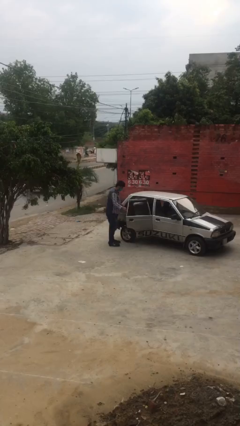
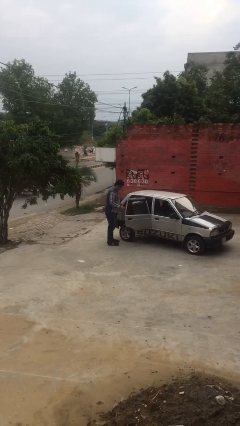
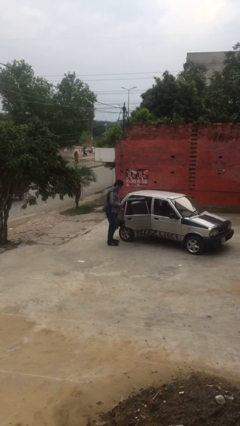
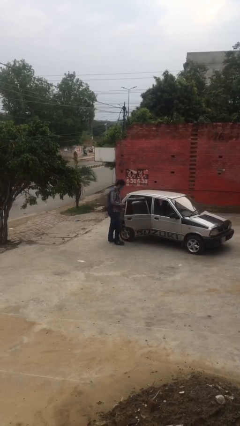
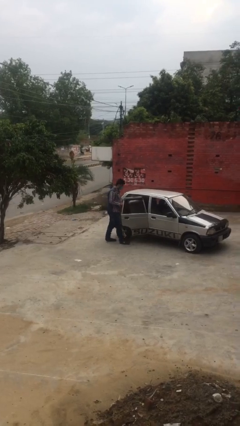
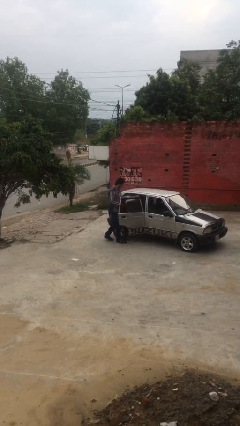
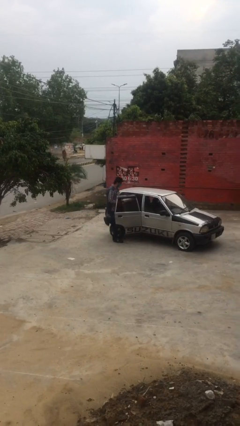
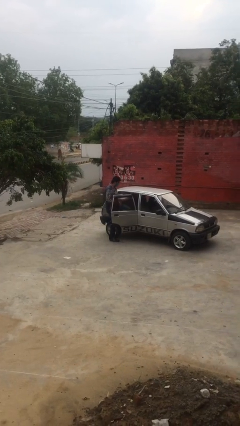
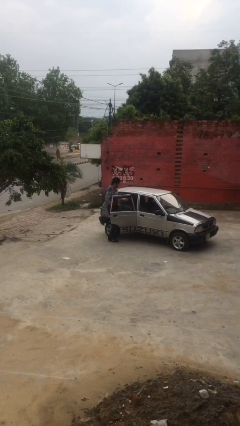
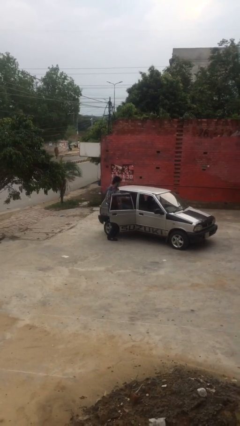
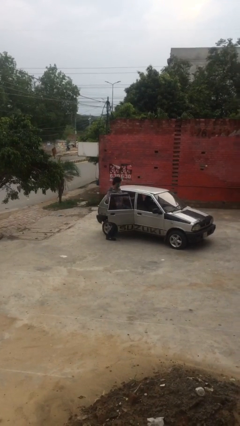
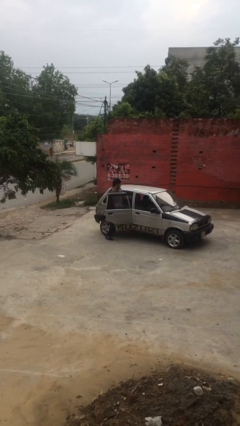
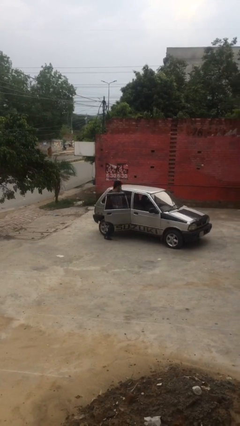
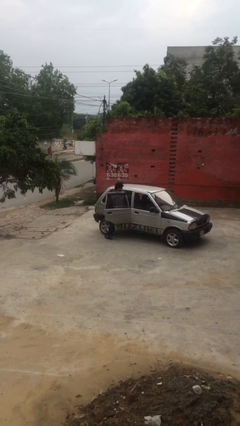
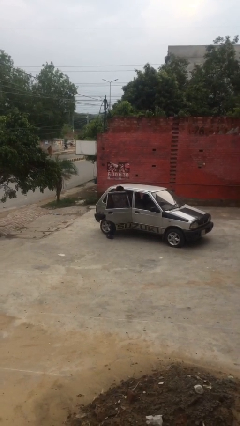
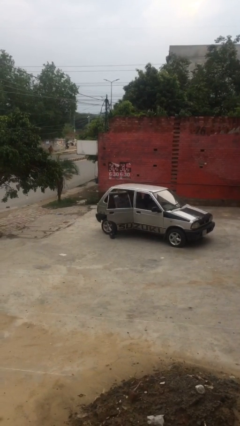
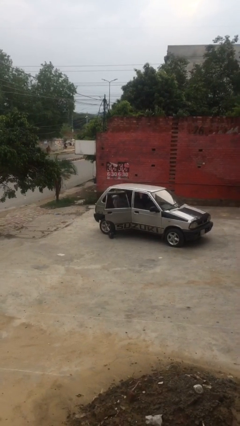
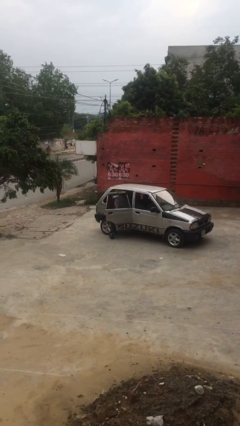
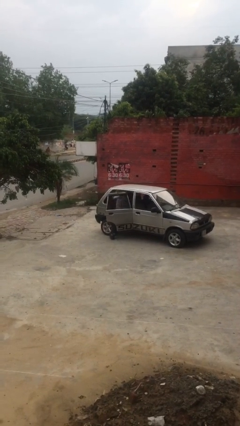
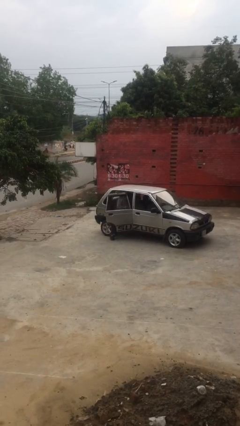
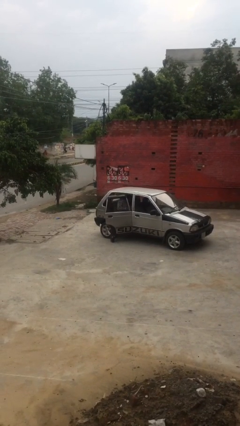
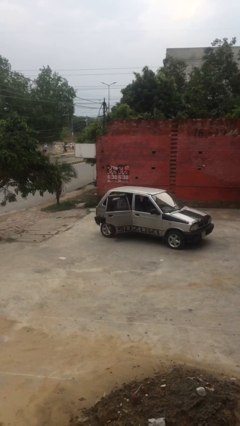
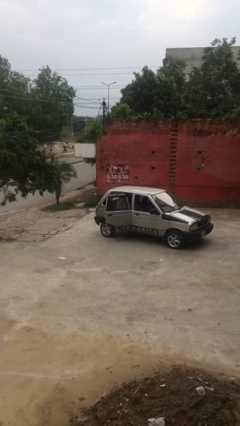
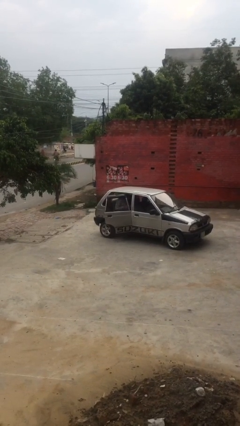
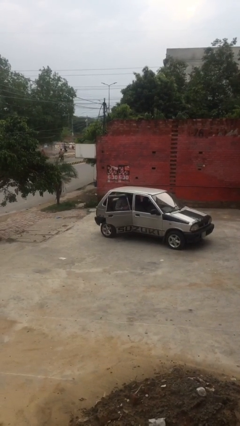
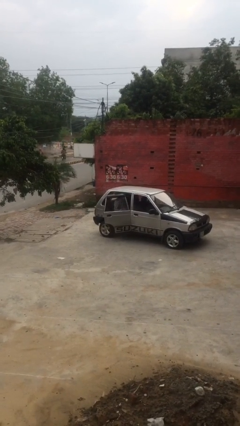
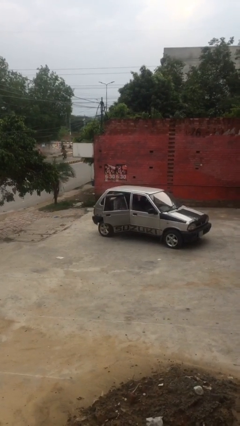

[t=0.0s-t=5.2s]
person enters car

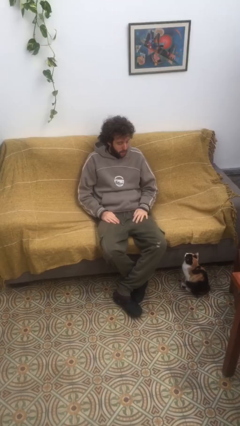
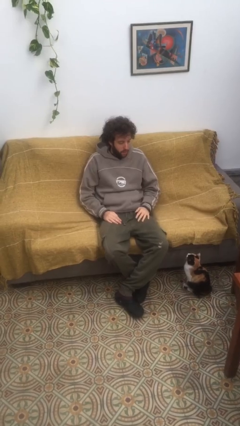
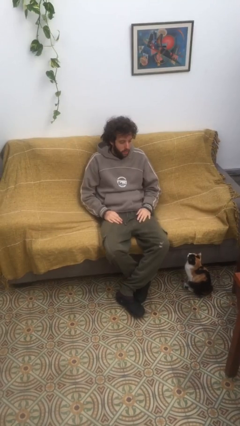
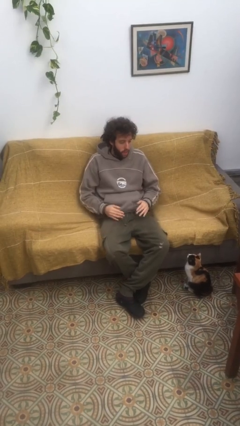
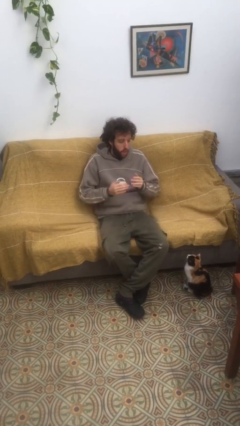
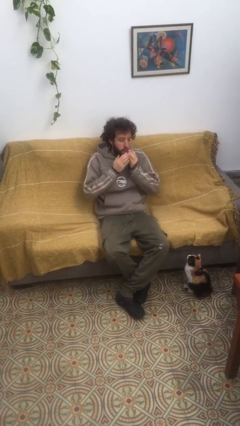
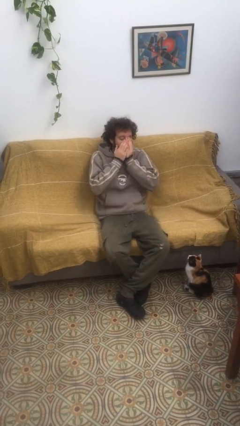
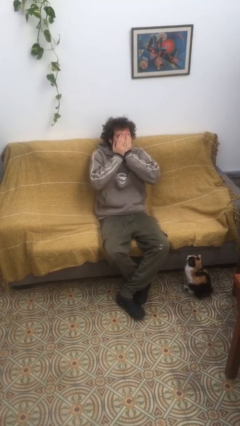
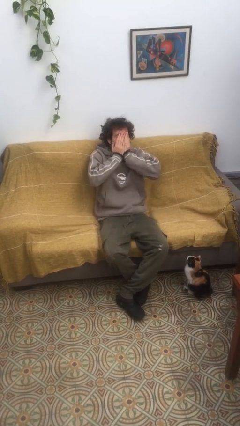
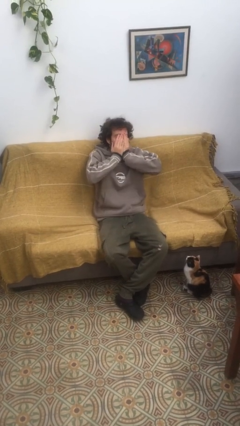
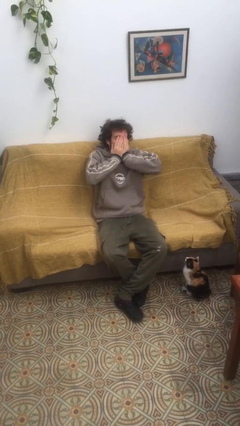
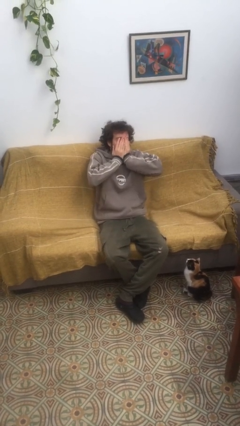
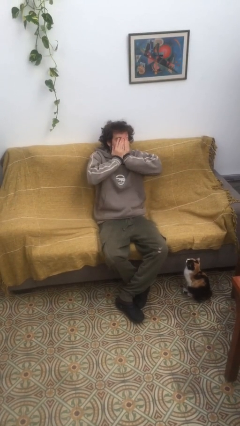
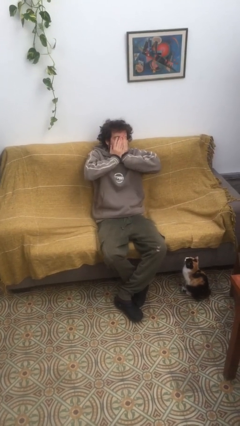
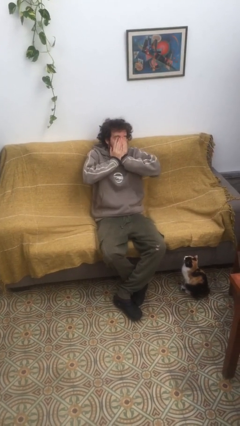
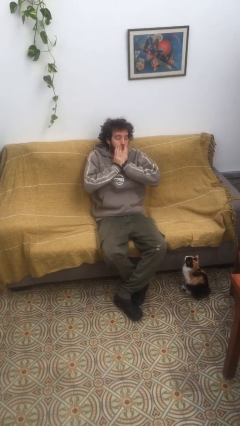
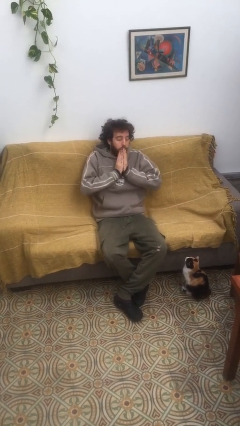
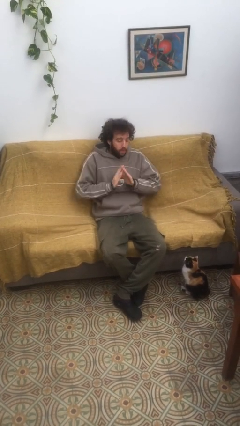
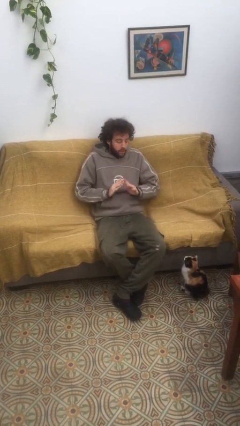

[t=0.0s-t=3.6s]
person yawns

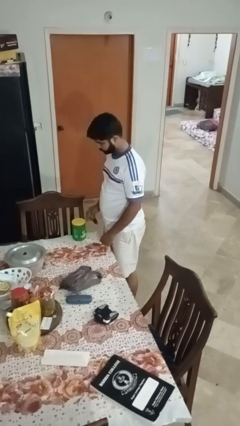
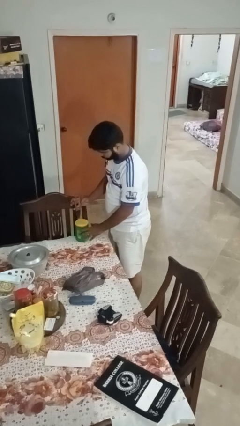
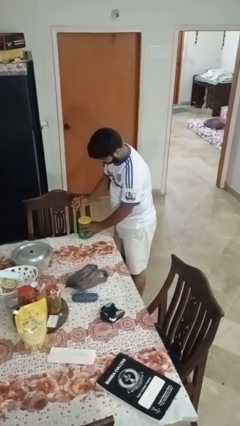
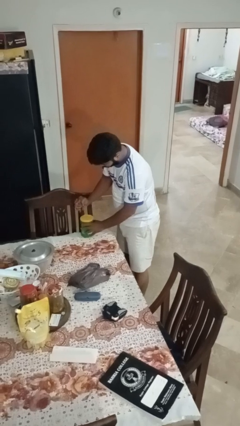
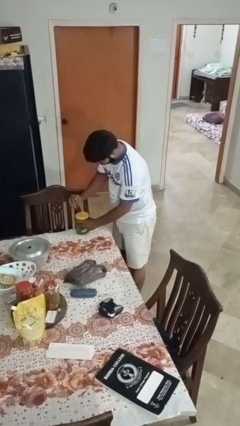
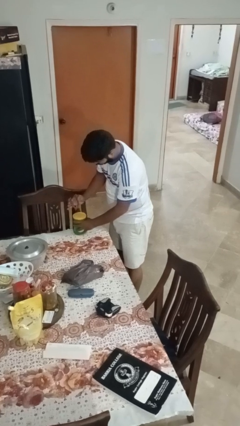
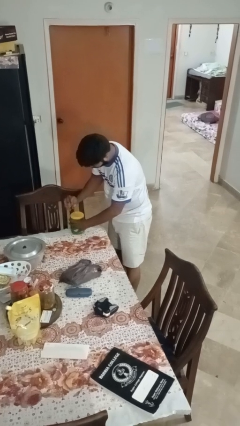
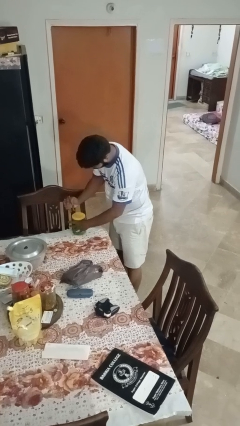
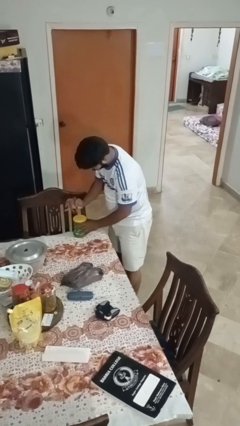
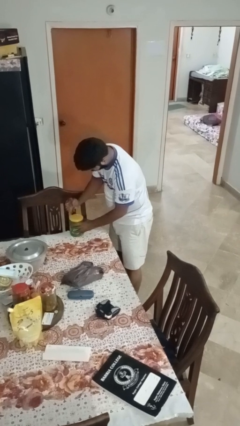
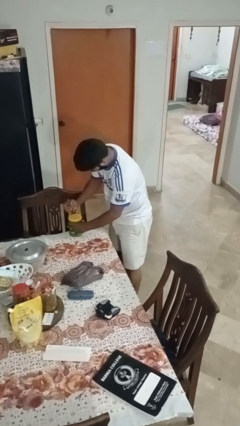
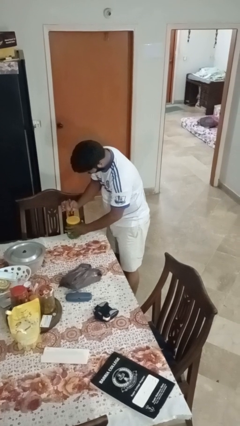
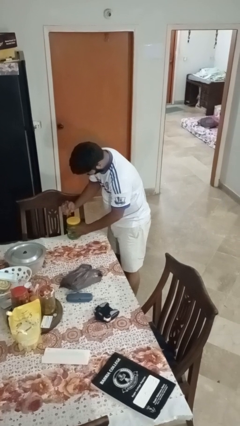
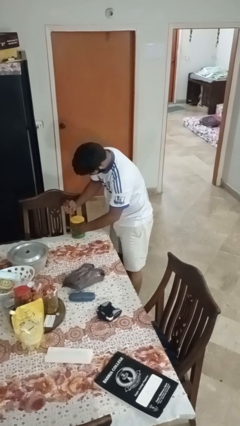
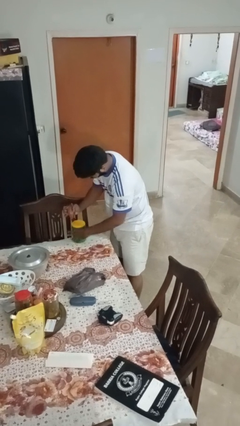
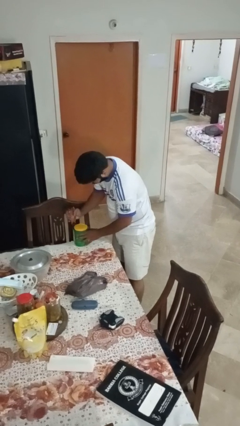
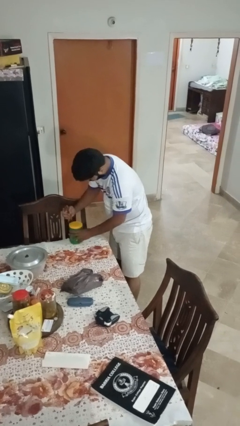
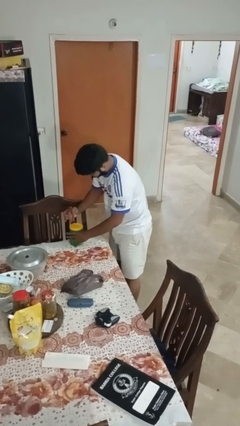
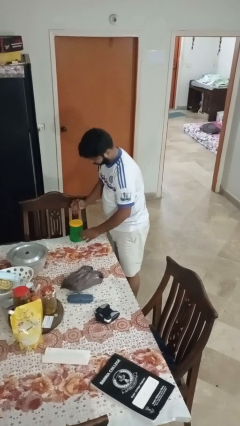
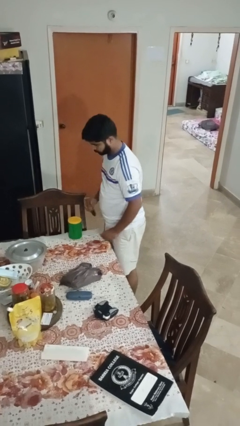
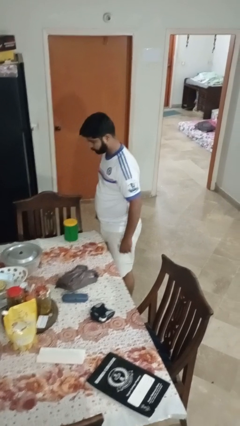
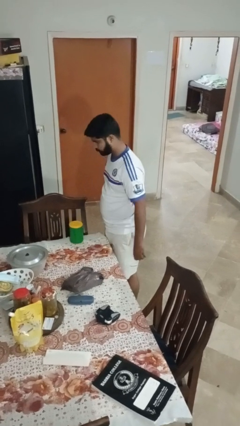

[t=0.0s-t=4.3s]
person opens can with can opener

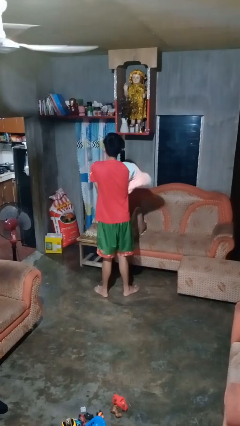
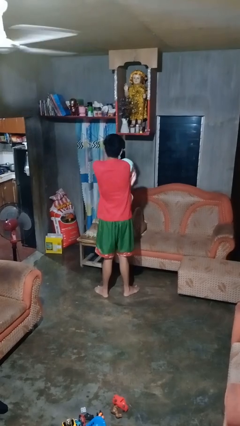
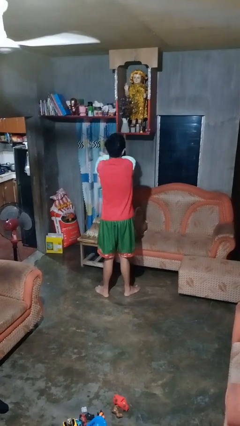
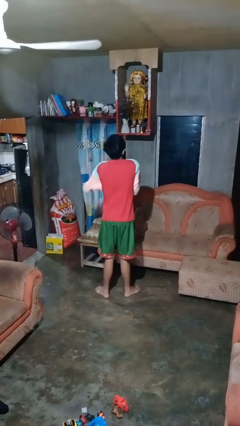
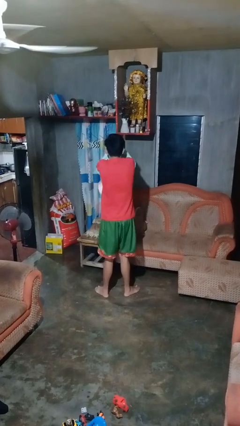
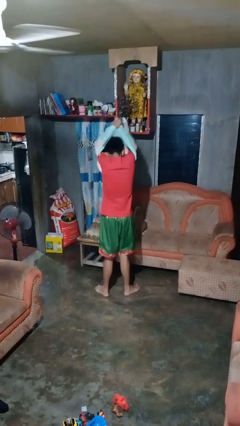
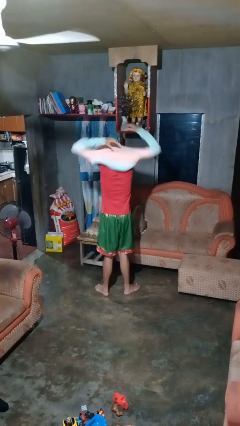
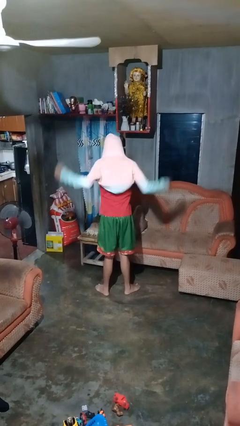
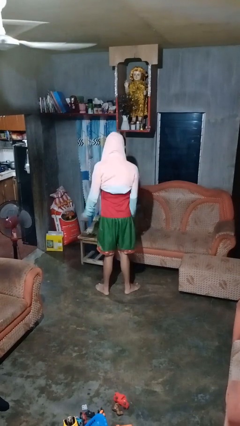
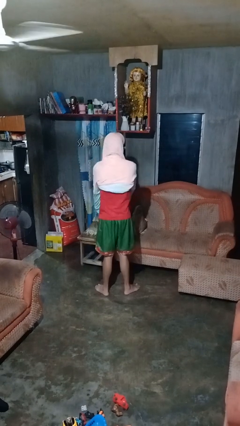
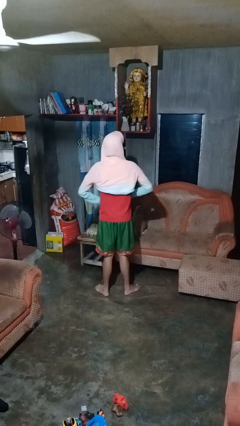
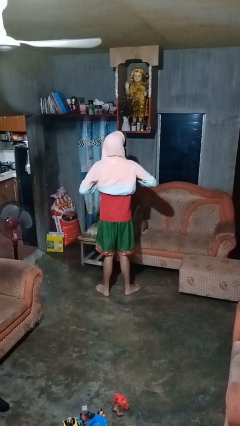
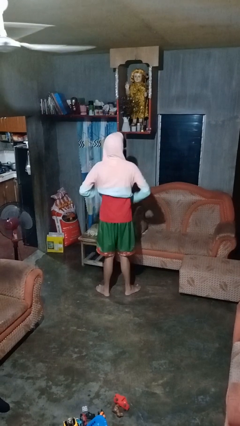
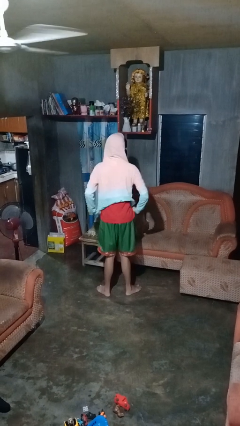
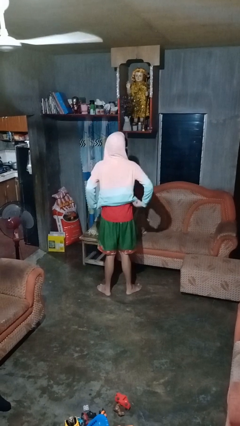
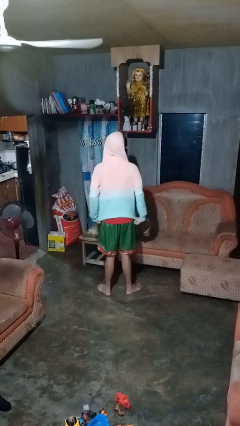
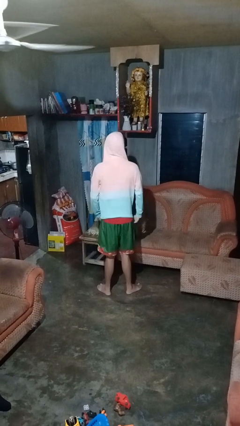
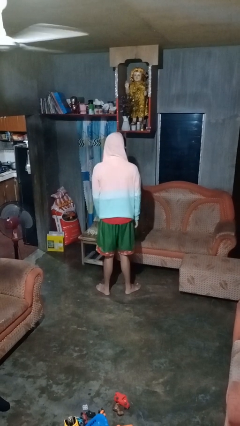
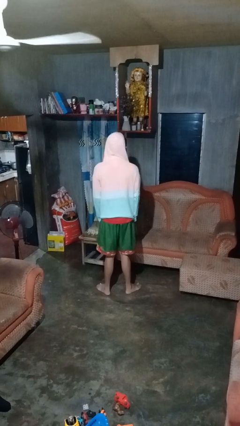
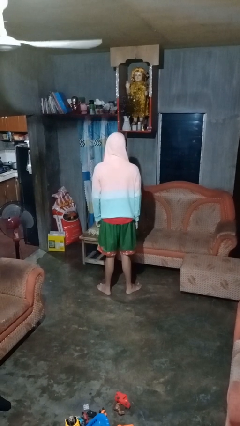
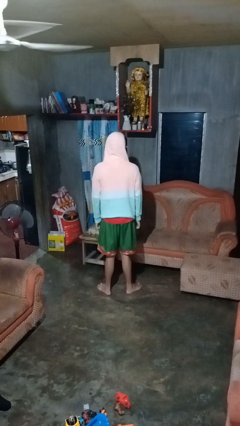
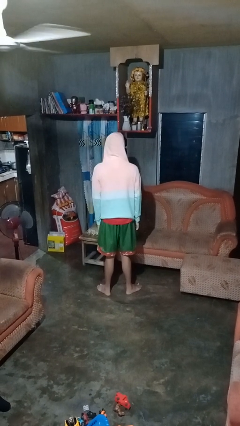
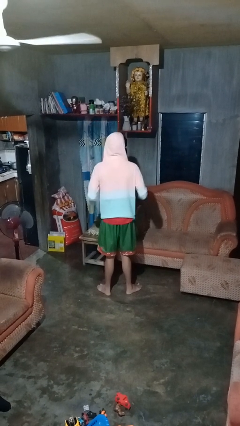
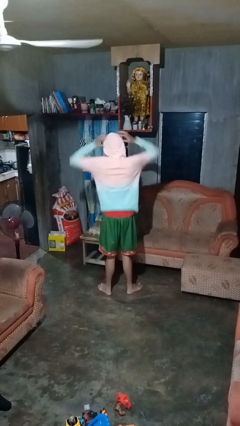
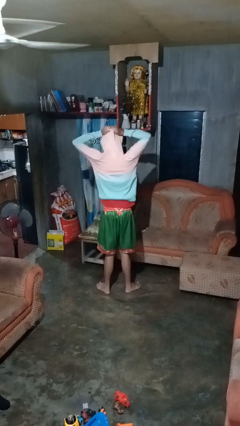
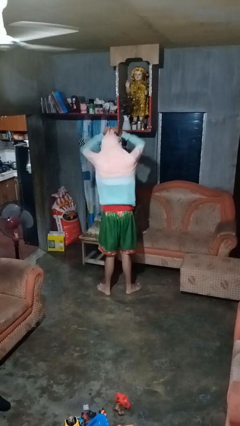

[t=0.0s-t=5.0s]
person puts on hoodie

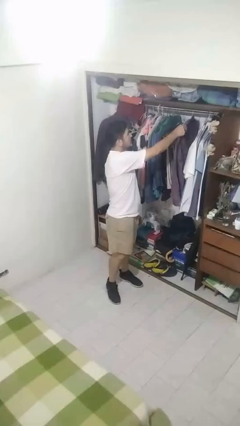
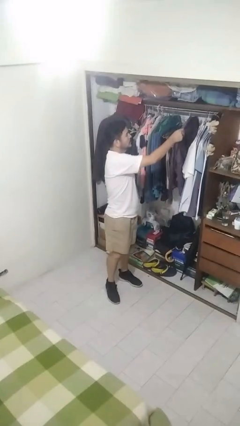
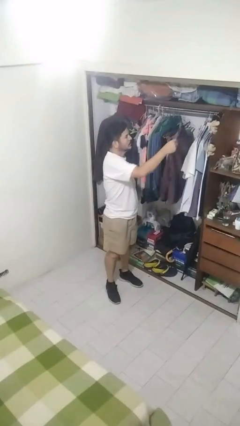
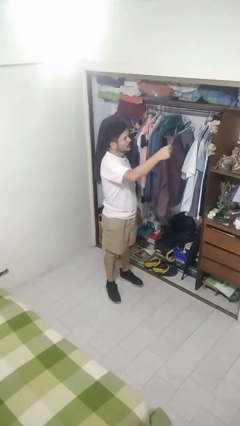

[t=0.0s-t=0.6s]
person takes clothes from closet
